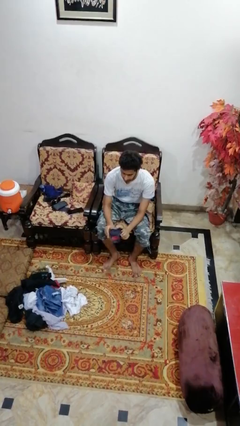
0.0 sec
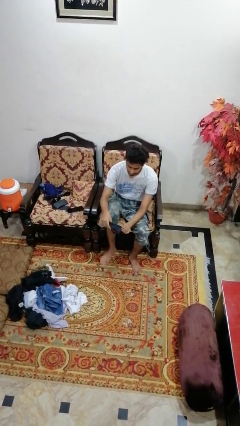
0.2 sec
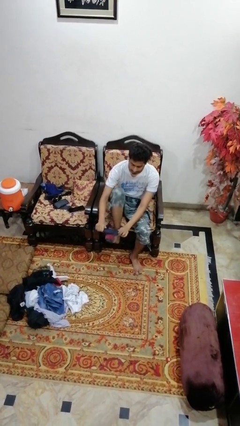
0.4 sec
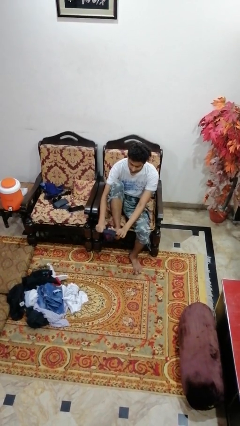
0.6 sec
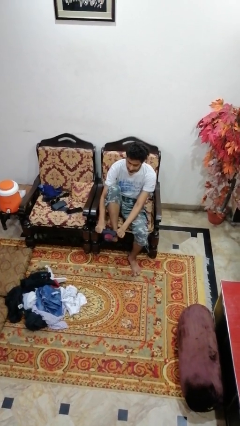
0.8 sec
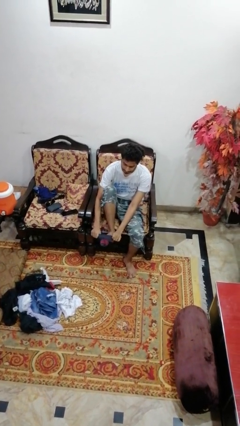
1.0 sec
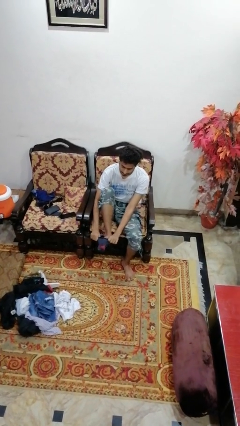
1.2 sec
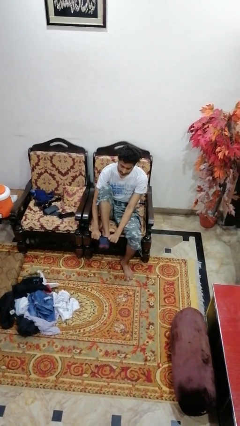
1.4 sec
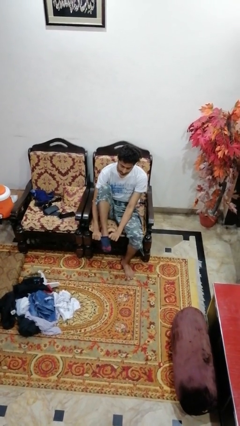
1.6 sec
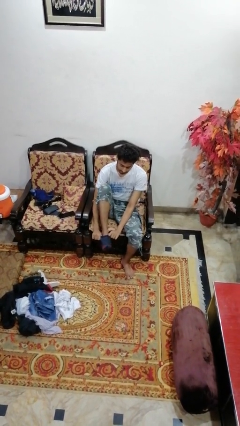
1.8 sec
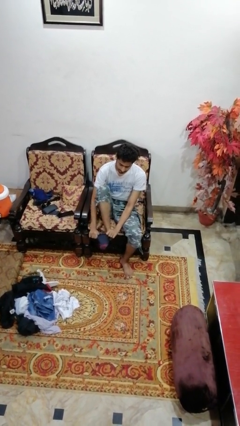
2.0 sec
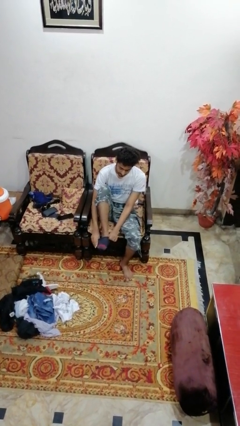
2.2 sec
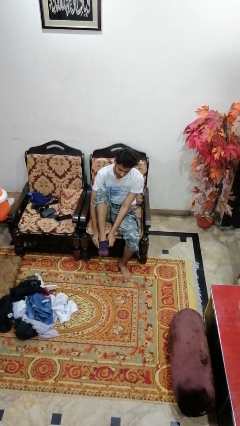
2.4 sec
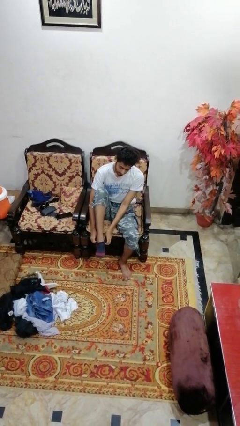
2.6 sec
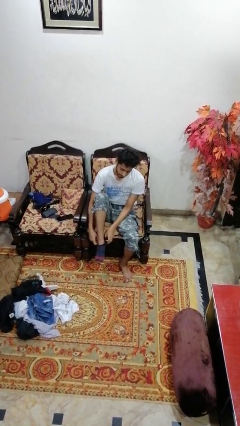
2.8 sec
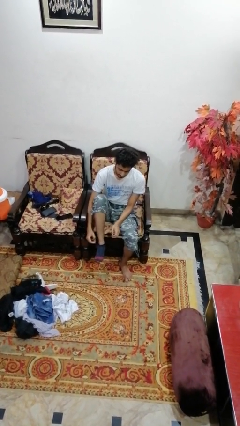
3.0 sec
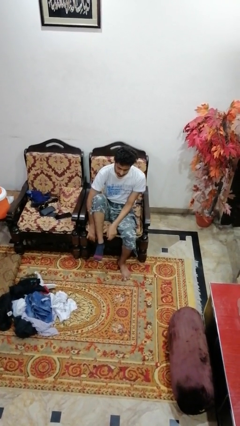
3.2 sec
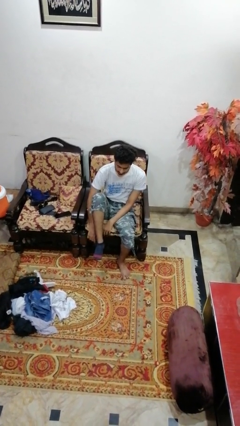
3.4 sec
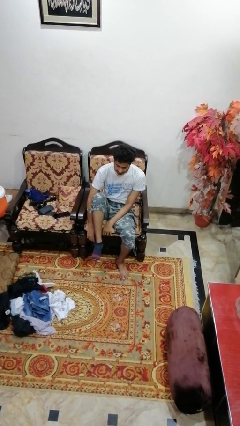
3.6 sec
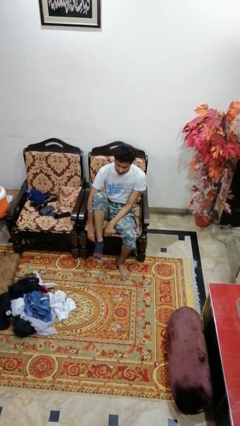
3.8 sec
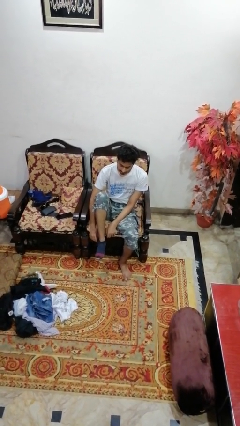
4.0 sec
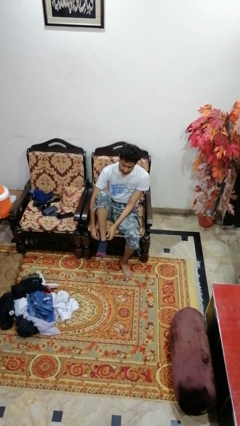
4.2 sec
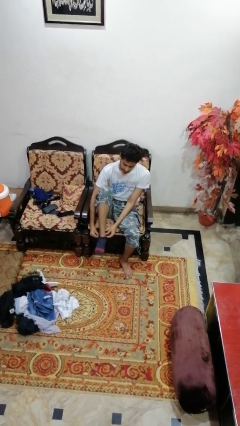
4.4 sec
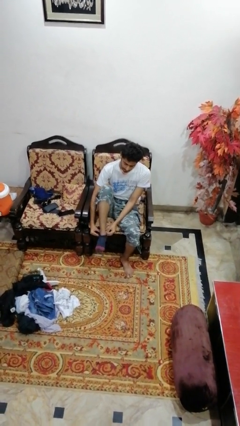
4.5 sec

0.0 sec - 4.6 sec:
person puts on socks

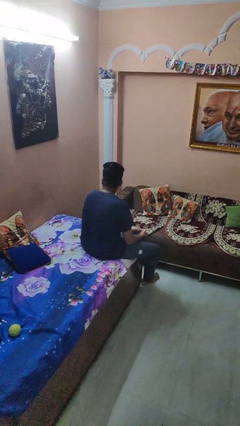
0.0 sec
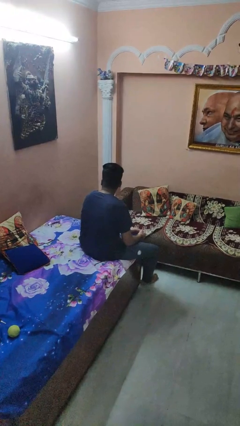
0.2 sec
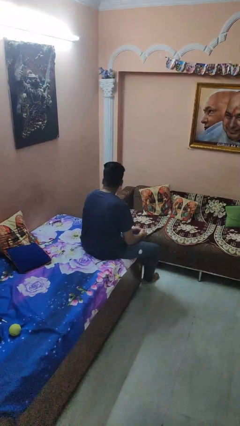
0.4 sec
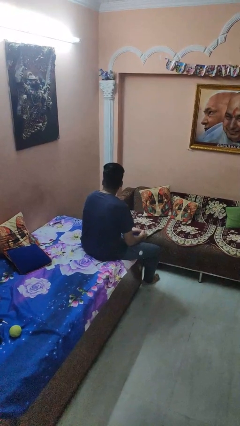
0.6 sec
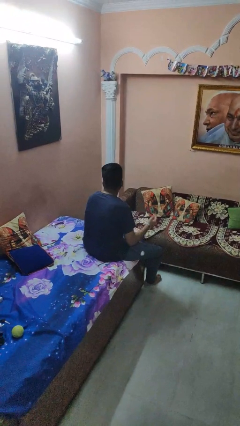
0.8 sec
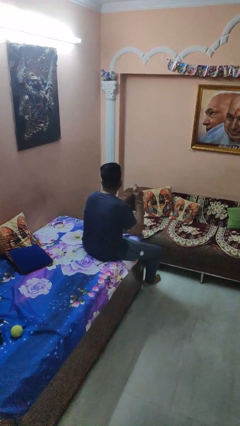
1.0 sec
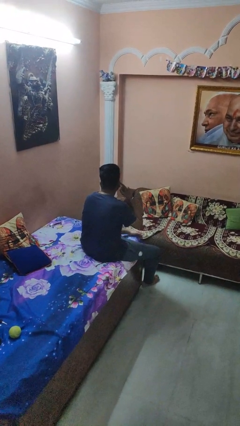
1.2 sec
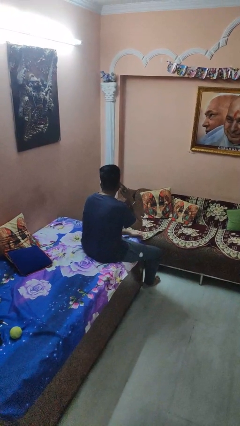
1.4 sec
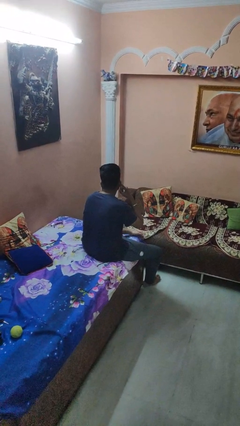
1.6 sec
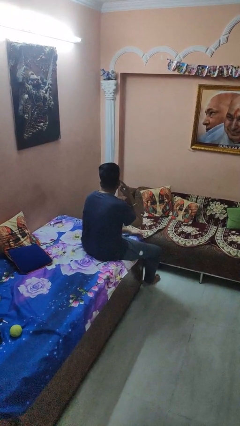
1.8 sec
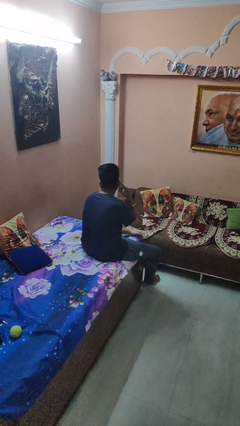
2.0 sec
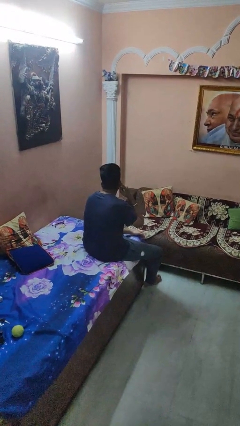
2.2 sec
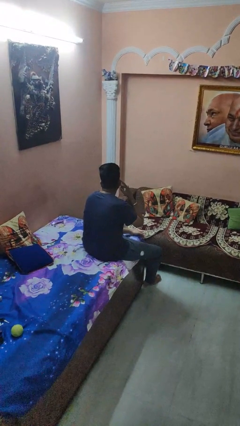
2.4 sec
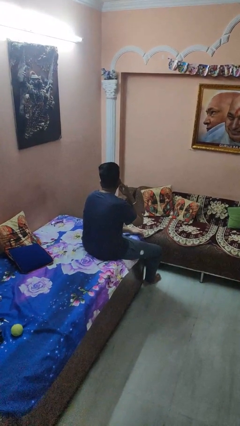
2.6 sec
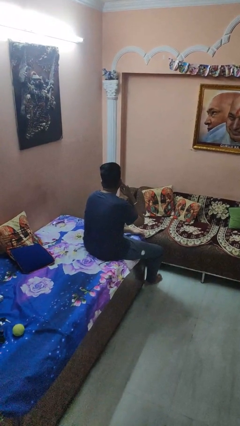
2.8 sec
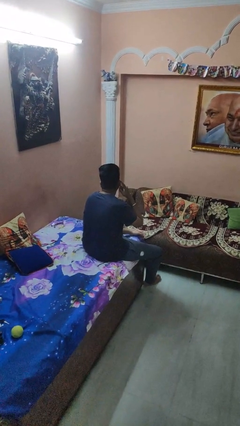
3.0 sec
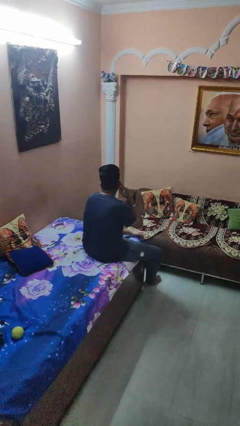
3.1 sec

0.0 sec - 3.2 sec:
person gestures listen closely

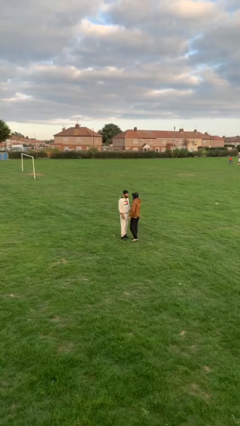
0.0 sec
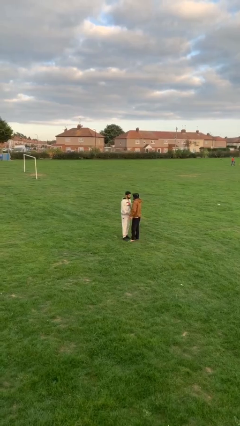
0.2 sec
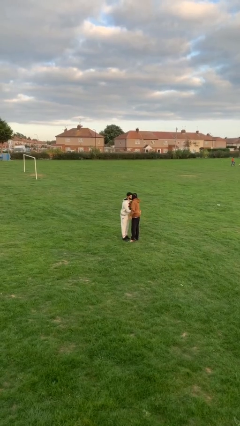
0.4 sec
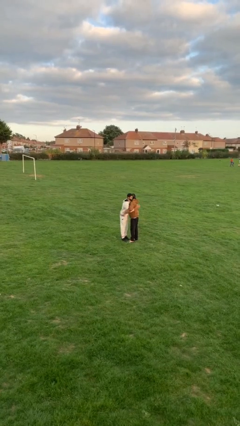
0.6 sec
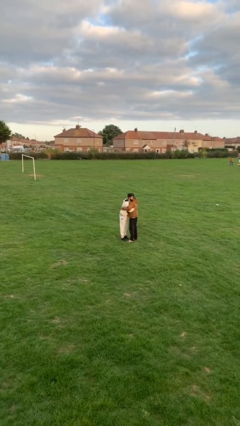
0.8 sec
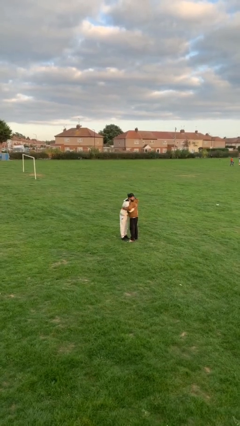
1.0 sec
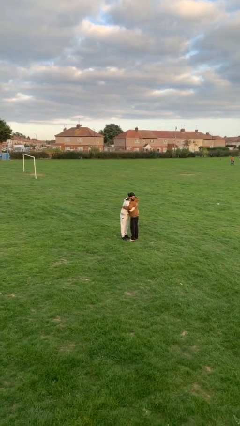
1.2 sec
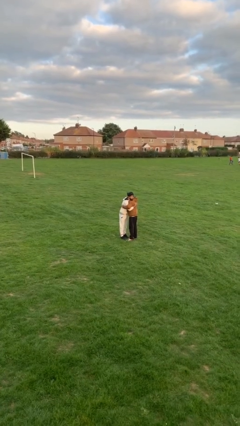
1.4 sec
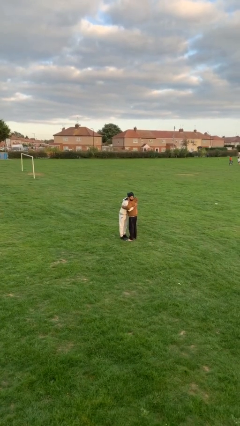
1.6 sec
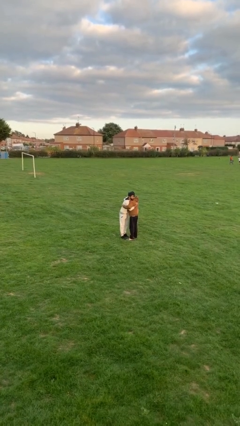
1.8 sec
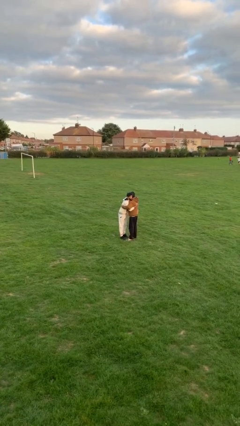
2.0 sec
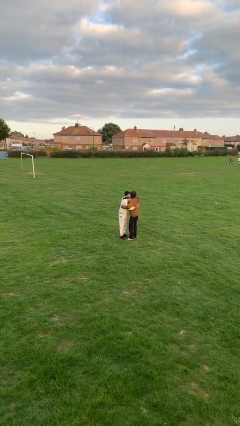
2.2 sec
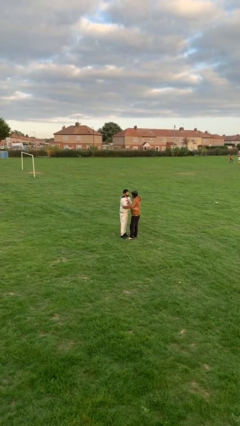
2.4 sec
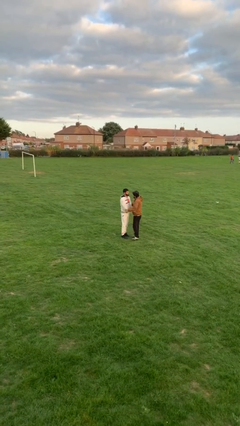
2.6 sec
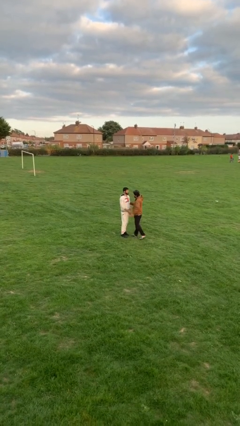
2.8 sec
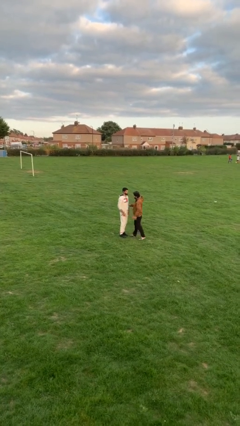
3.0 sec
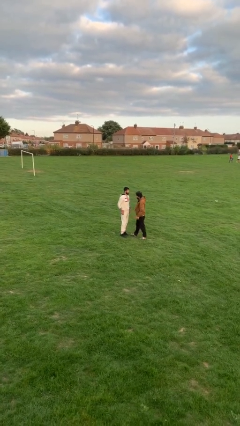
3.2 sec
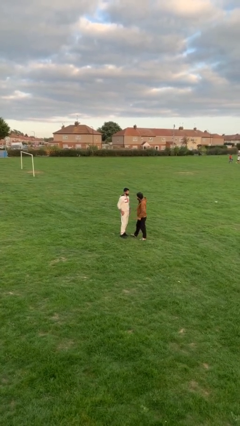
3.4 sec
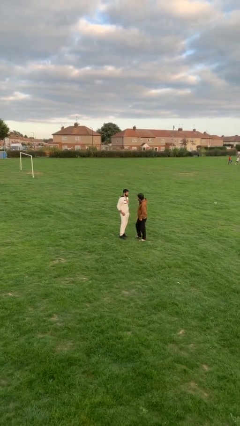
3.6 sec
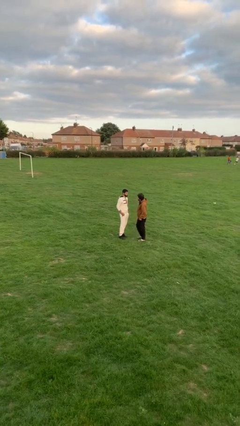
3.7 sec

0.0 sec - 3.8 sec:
person embraces person

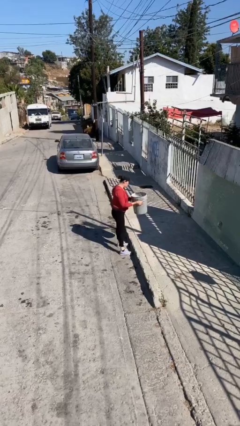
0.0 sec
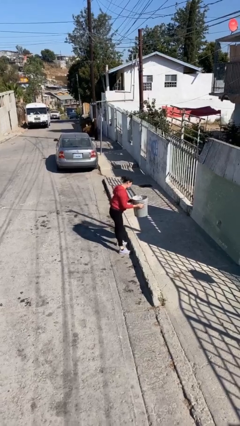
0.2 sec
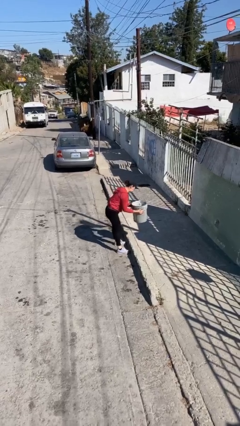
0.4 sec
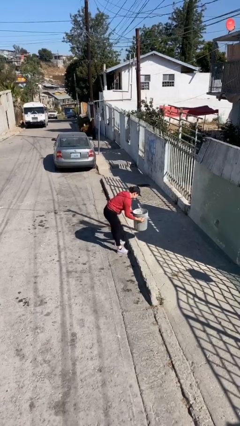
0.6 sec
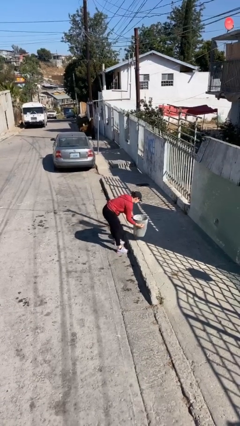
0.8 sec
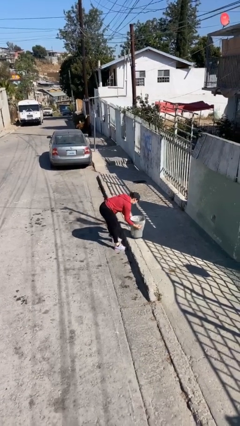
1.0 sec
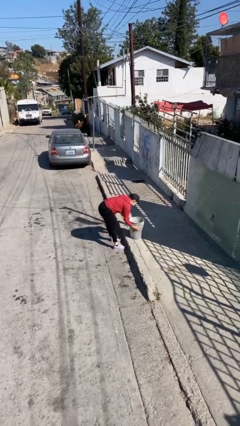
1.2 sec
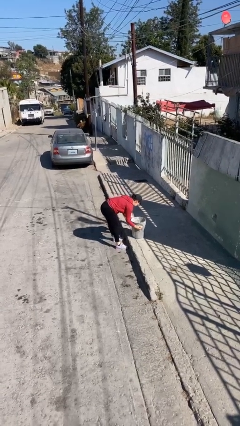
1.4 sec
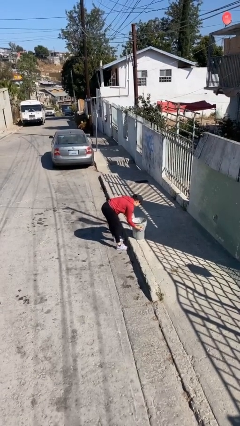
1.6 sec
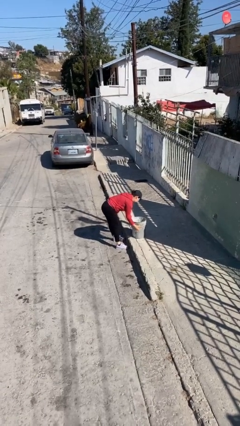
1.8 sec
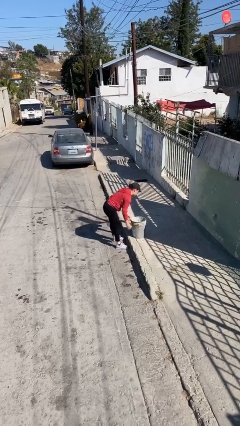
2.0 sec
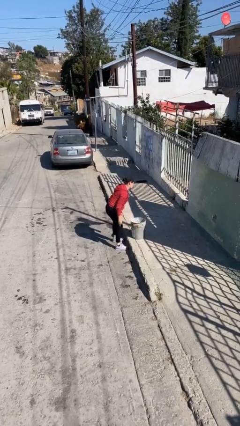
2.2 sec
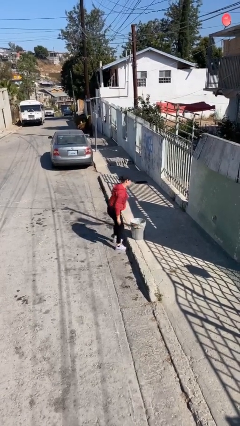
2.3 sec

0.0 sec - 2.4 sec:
person puts down object on floor

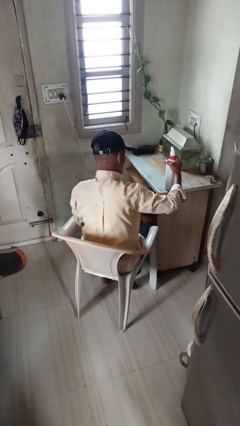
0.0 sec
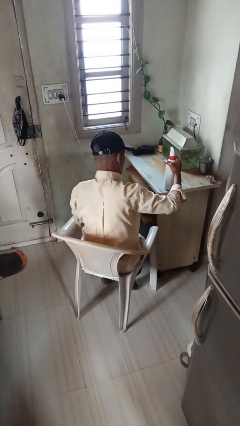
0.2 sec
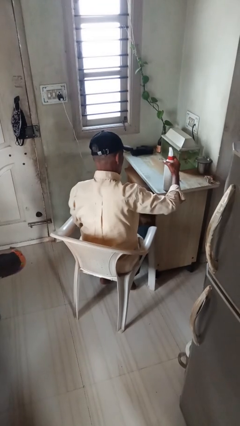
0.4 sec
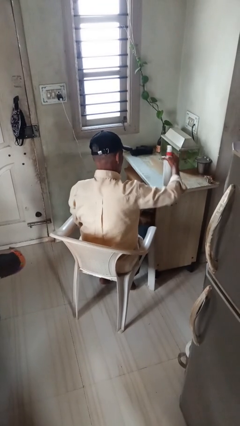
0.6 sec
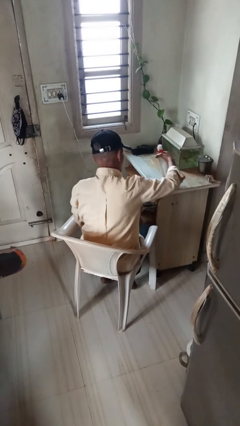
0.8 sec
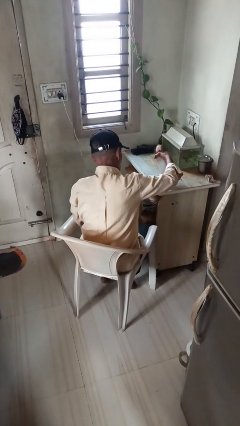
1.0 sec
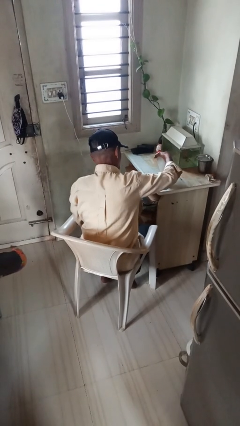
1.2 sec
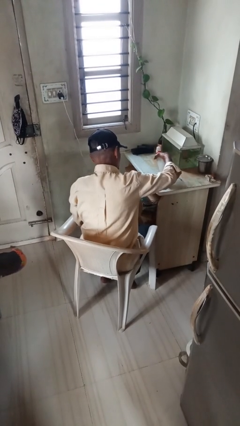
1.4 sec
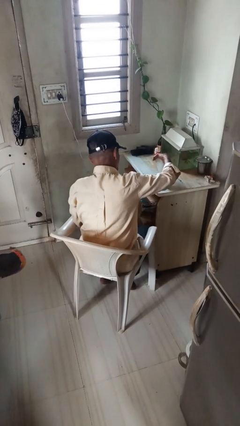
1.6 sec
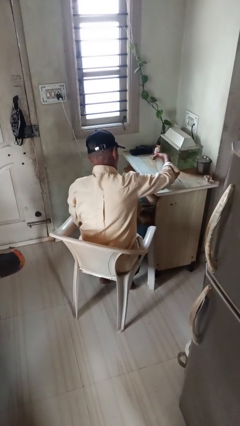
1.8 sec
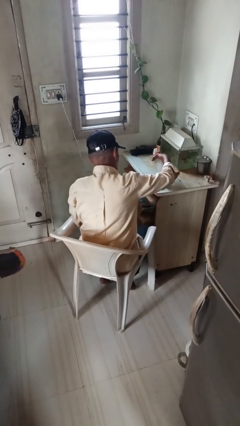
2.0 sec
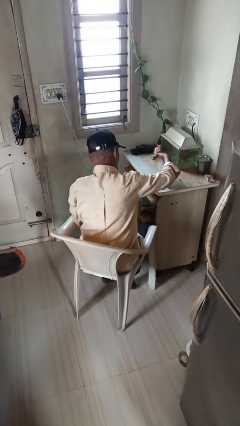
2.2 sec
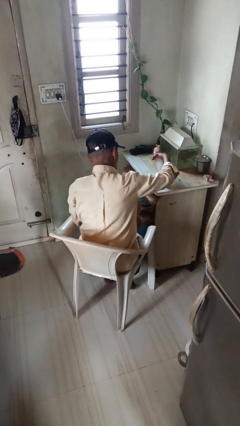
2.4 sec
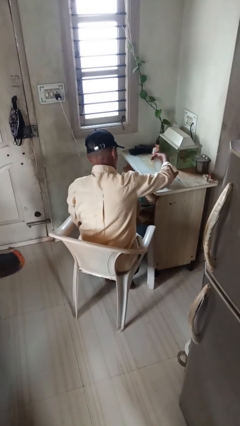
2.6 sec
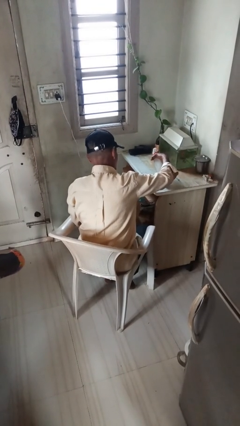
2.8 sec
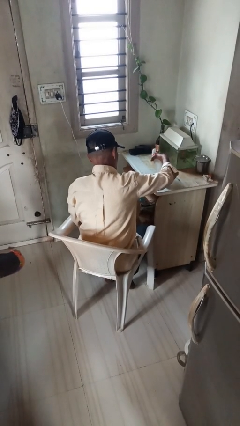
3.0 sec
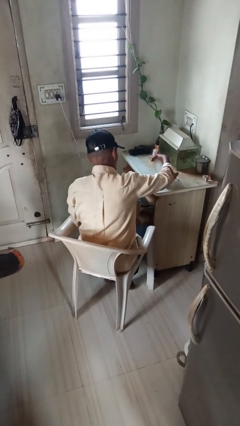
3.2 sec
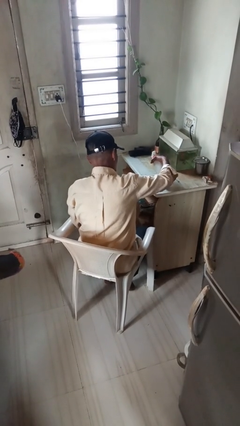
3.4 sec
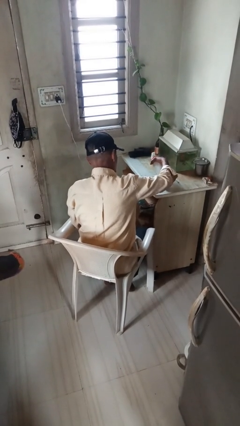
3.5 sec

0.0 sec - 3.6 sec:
person sprays from bottle

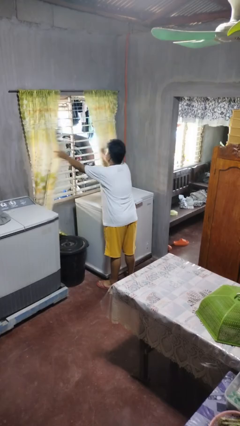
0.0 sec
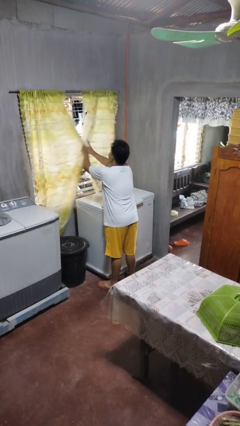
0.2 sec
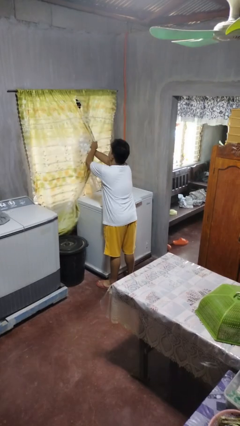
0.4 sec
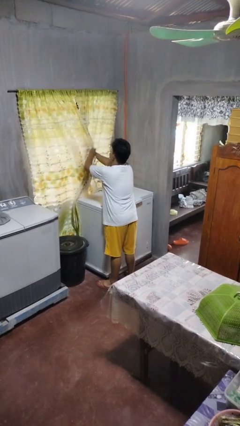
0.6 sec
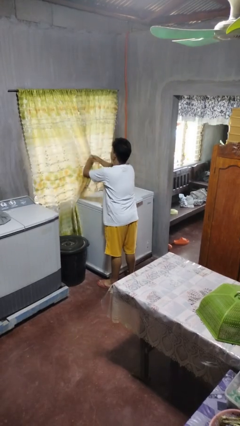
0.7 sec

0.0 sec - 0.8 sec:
person closes curtains
